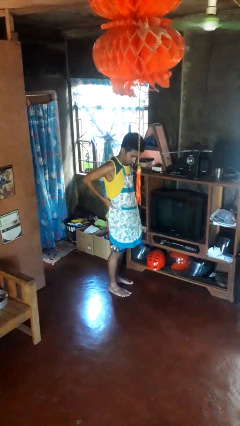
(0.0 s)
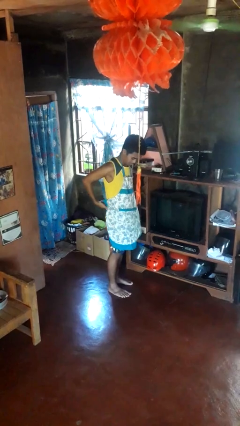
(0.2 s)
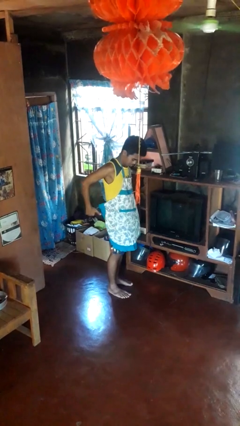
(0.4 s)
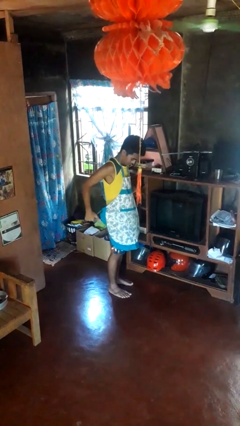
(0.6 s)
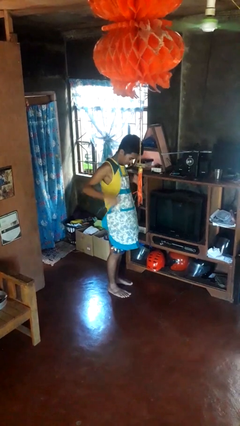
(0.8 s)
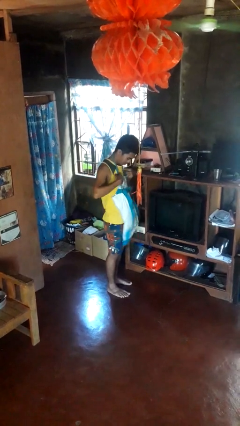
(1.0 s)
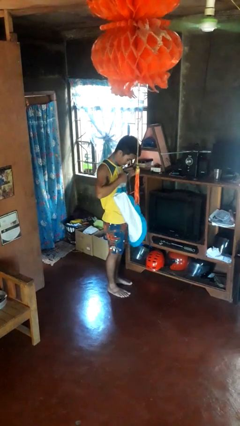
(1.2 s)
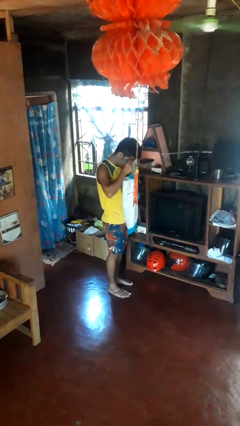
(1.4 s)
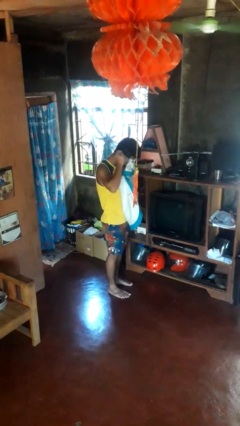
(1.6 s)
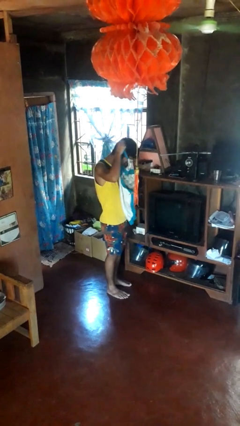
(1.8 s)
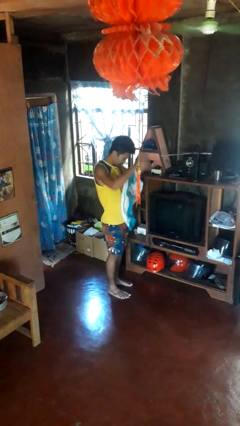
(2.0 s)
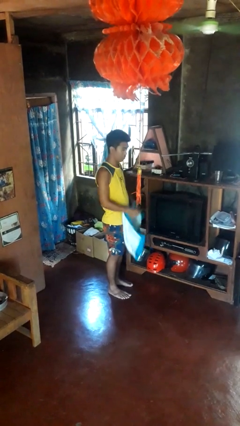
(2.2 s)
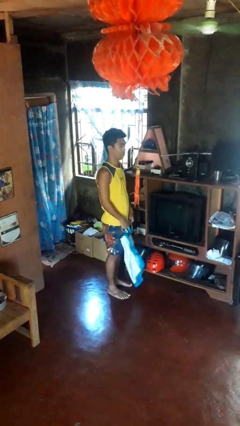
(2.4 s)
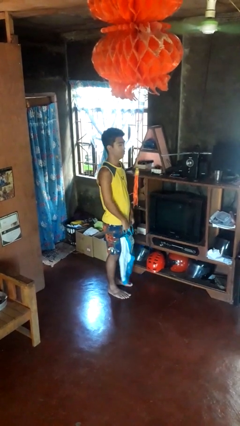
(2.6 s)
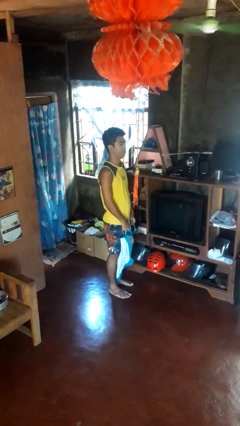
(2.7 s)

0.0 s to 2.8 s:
person takes off apron

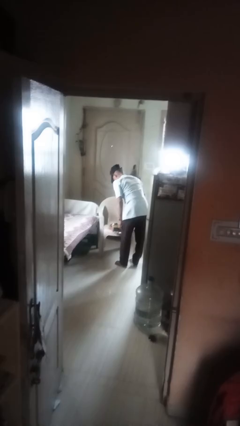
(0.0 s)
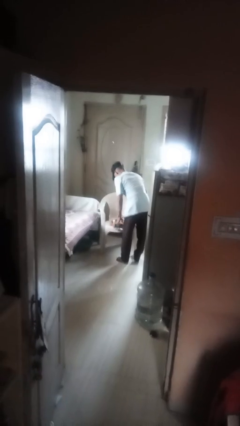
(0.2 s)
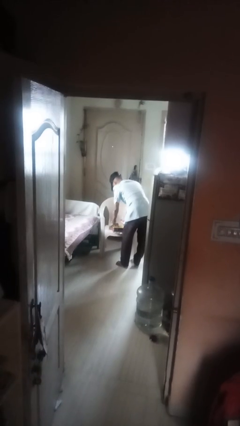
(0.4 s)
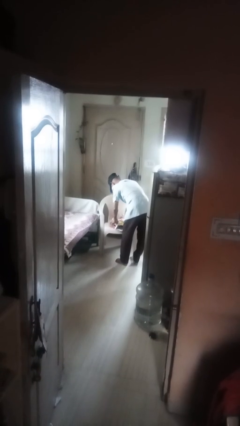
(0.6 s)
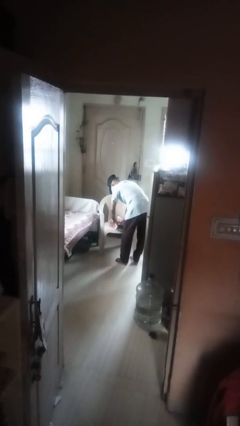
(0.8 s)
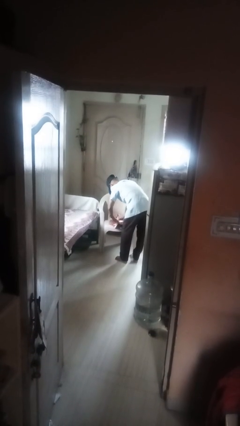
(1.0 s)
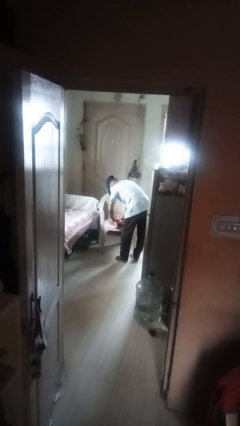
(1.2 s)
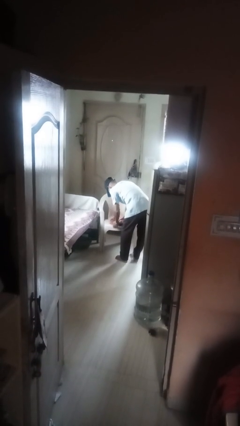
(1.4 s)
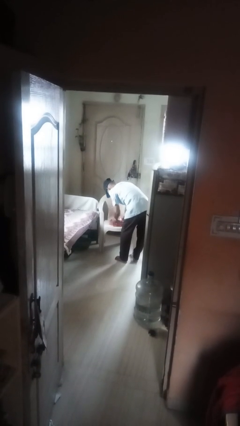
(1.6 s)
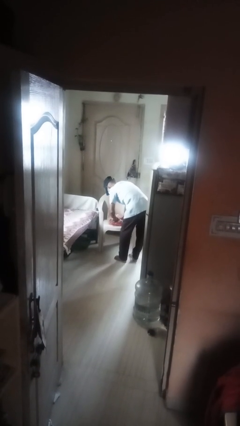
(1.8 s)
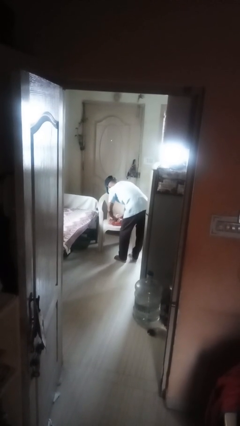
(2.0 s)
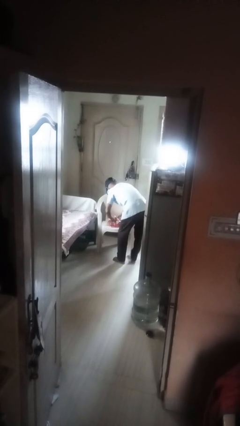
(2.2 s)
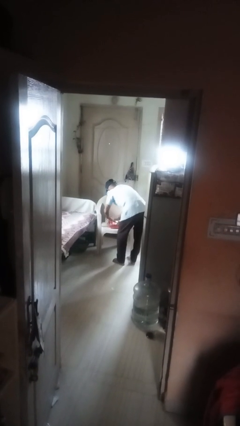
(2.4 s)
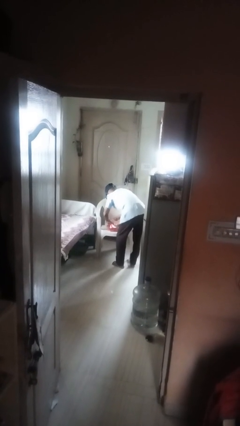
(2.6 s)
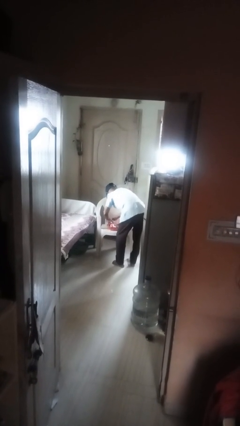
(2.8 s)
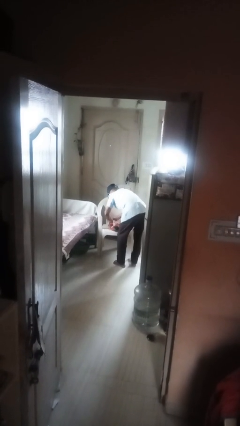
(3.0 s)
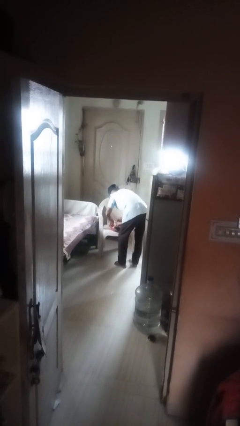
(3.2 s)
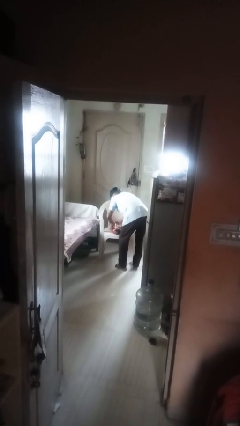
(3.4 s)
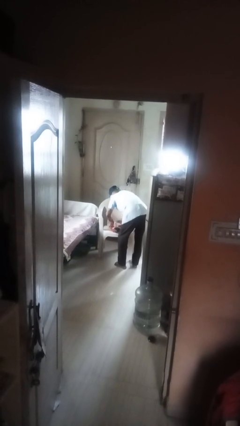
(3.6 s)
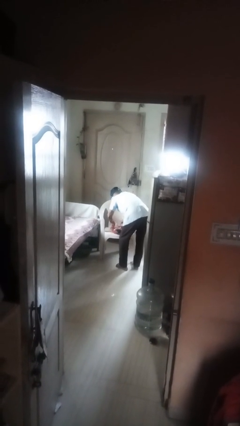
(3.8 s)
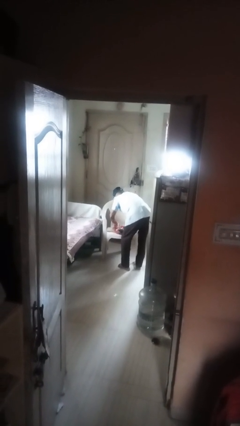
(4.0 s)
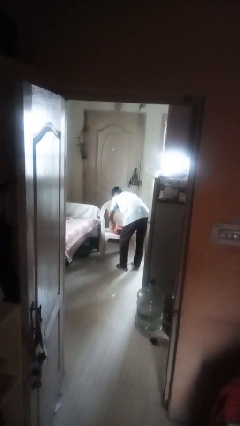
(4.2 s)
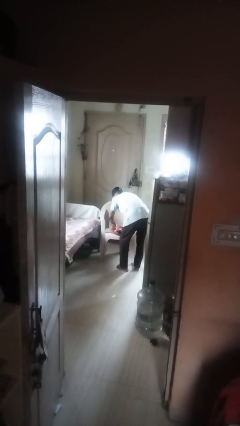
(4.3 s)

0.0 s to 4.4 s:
person wraps box

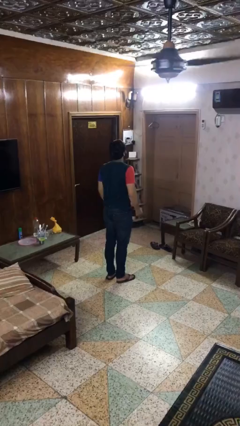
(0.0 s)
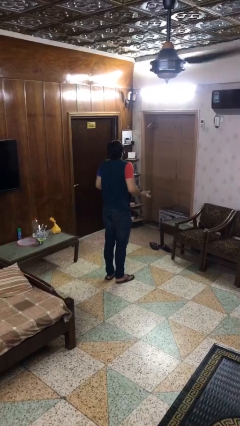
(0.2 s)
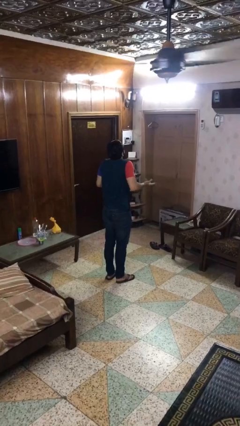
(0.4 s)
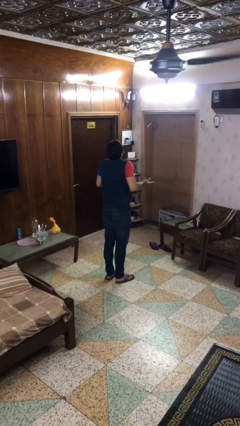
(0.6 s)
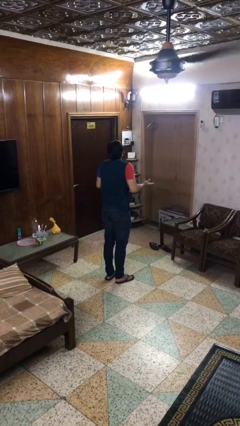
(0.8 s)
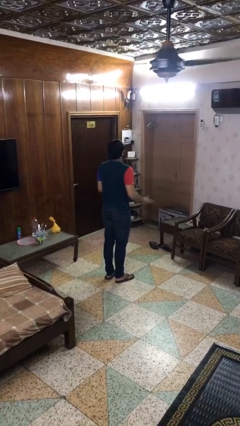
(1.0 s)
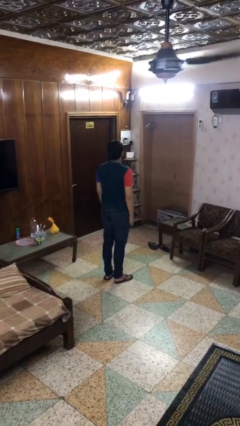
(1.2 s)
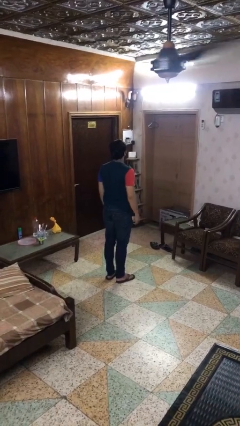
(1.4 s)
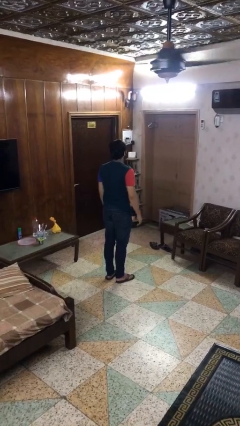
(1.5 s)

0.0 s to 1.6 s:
person shrugs

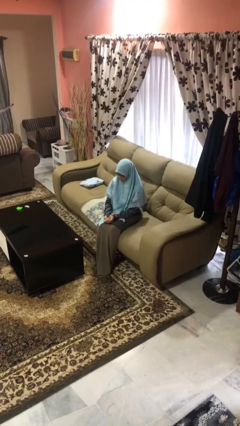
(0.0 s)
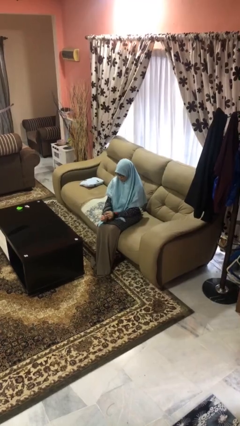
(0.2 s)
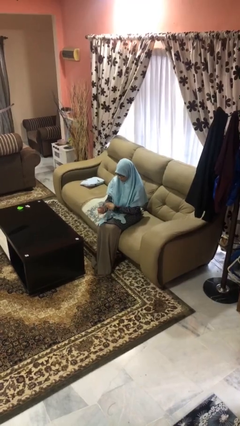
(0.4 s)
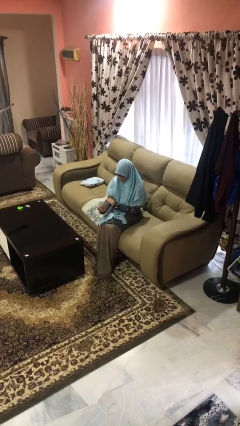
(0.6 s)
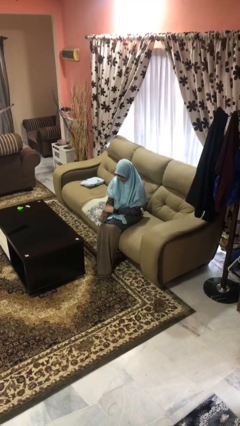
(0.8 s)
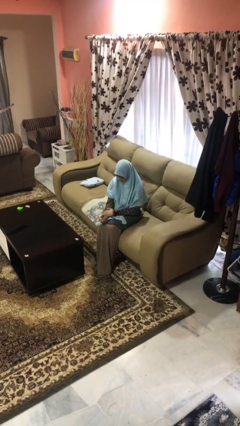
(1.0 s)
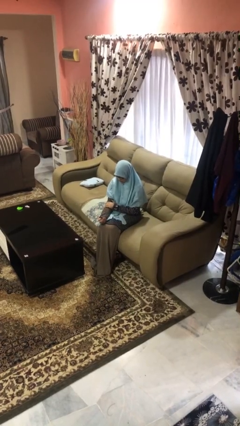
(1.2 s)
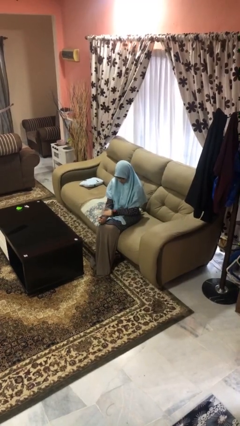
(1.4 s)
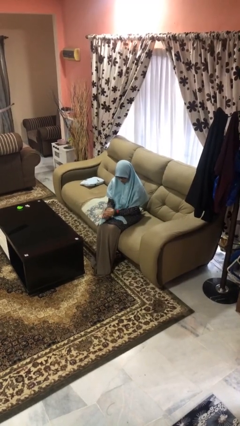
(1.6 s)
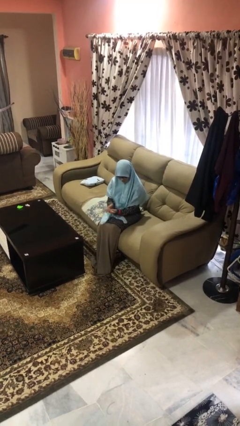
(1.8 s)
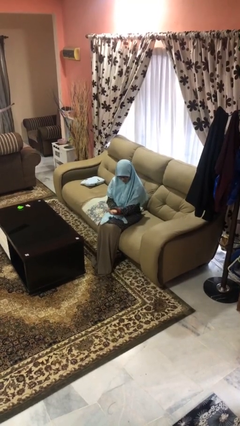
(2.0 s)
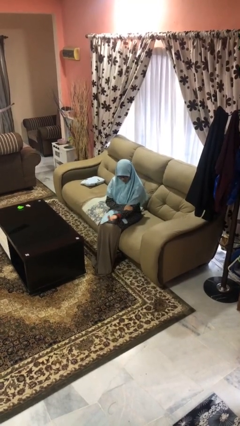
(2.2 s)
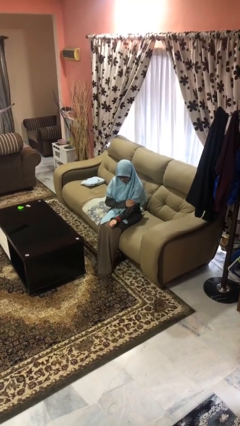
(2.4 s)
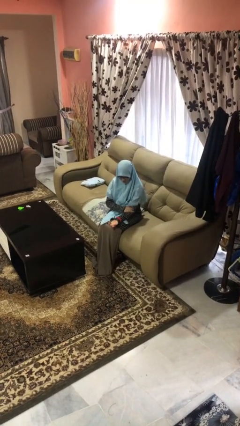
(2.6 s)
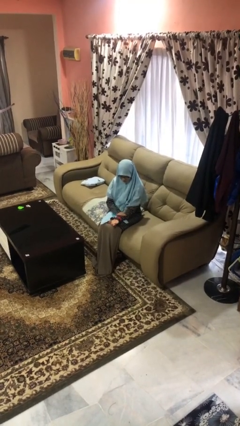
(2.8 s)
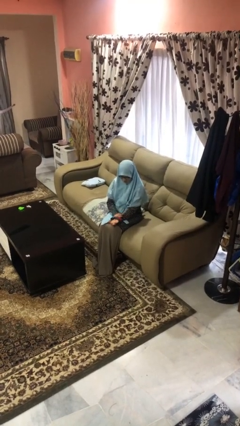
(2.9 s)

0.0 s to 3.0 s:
person looks at hands in lap

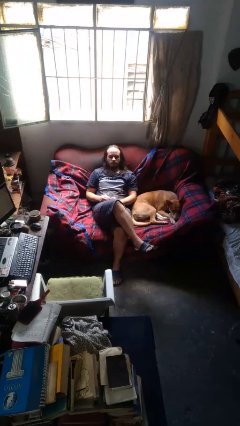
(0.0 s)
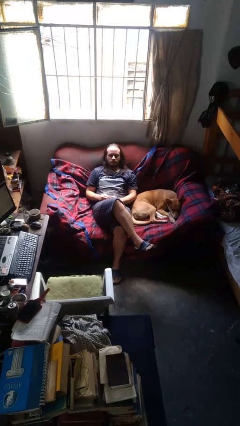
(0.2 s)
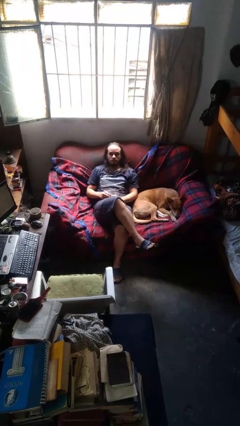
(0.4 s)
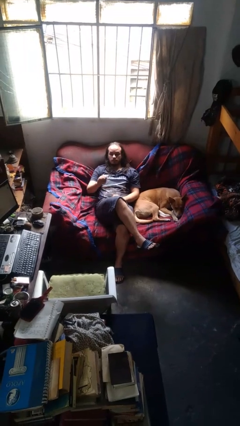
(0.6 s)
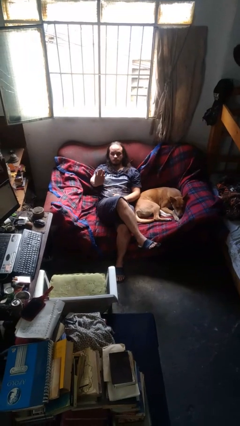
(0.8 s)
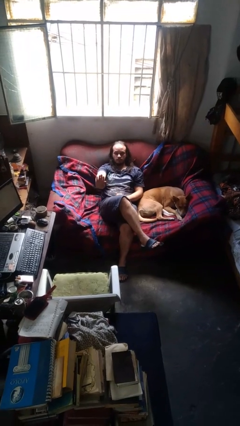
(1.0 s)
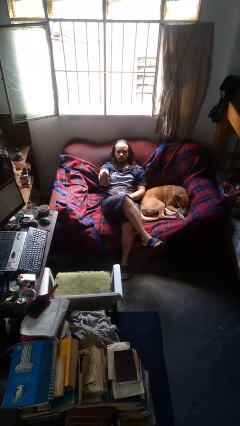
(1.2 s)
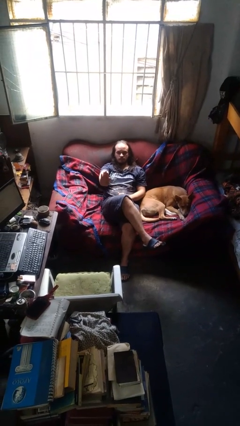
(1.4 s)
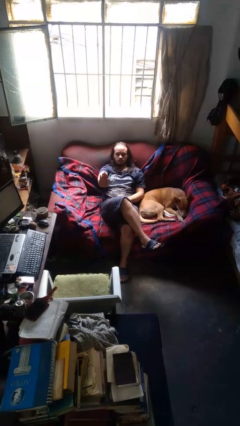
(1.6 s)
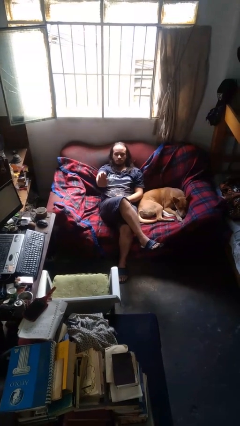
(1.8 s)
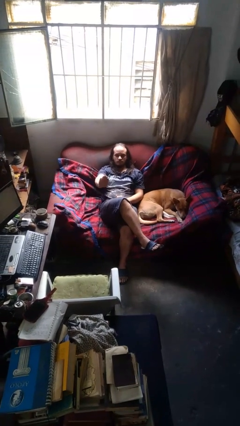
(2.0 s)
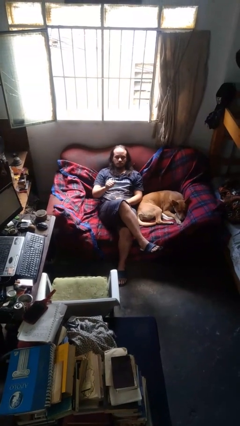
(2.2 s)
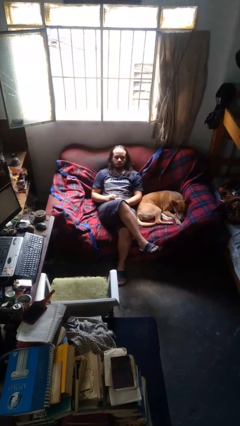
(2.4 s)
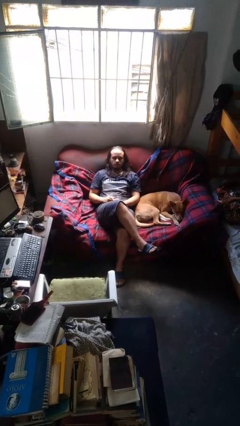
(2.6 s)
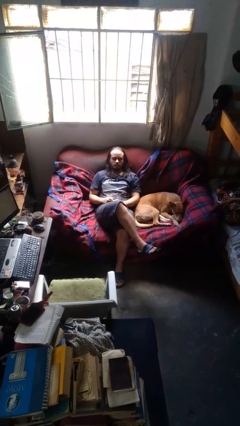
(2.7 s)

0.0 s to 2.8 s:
person gestures stop

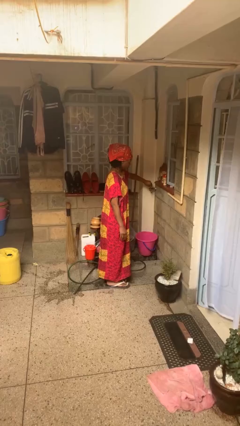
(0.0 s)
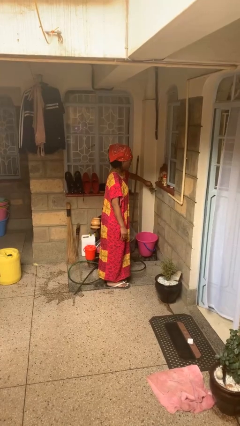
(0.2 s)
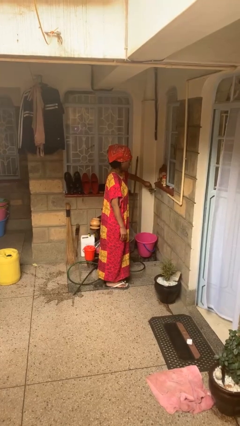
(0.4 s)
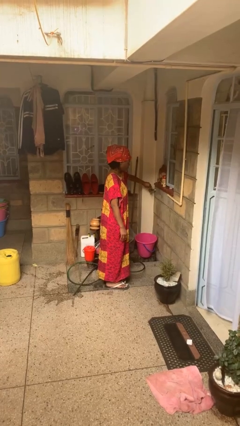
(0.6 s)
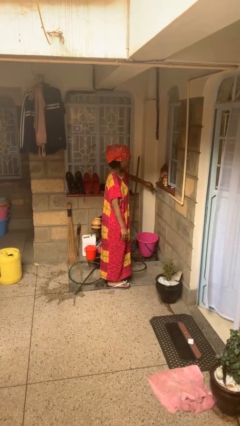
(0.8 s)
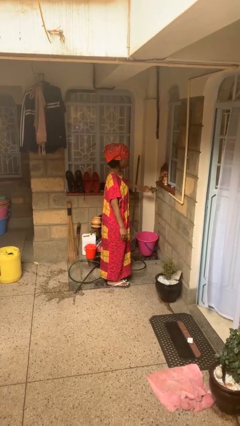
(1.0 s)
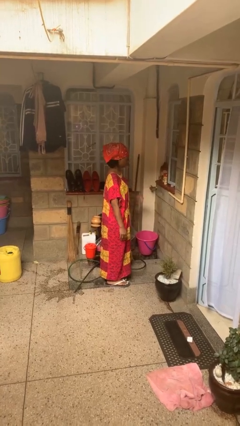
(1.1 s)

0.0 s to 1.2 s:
person turns off faucet

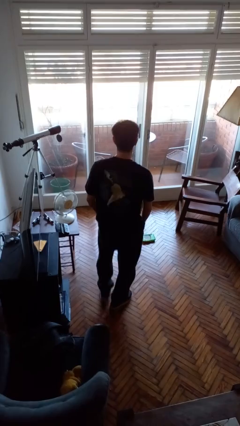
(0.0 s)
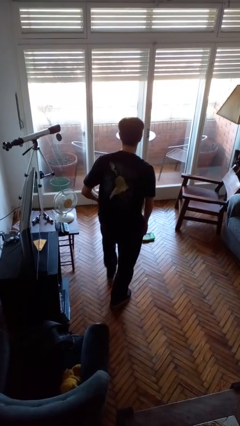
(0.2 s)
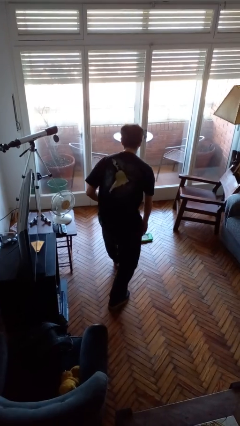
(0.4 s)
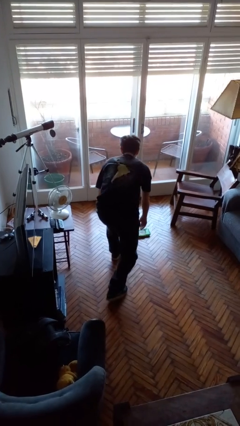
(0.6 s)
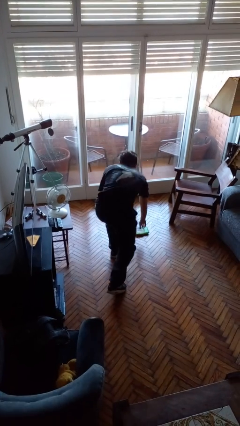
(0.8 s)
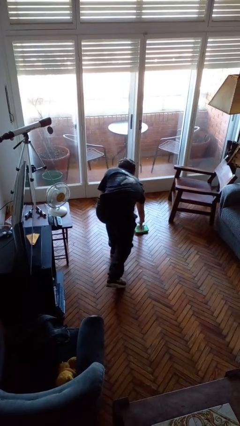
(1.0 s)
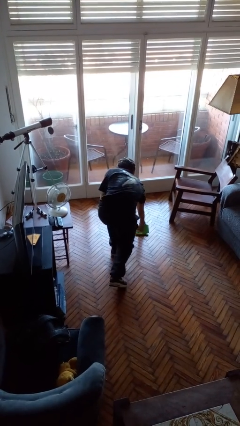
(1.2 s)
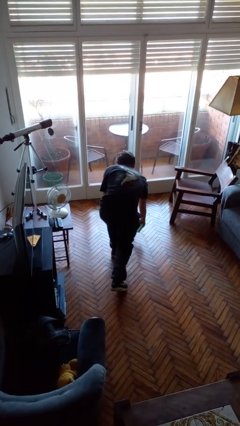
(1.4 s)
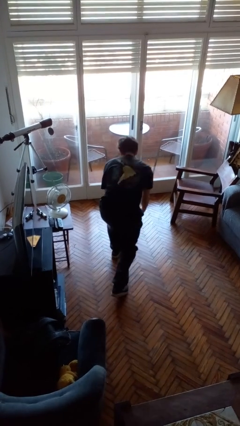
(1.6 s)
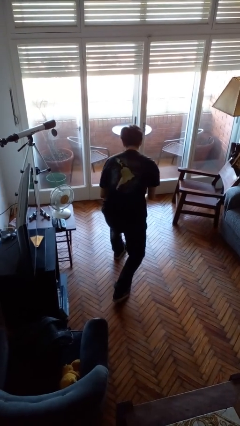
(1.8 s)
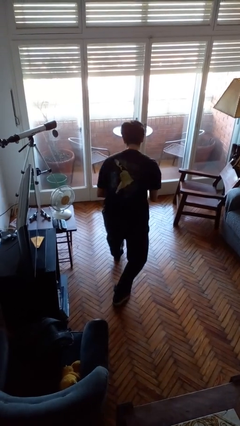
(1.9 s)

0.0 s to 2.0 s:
person picks up object from floor
